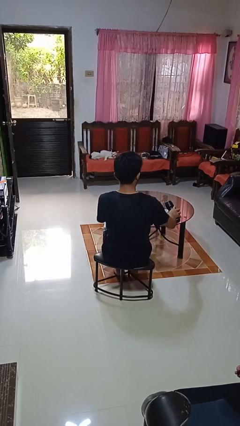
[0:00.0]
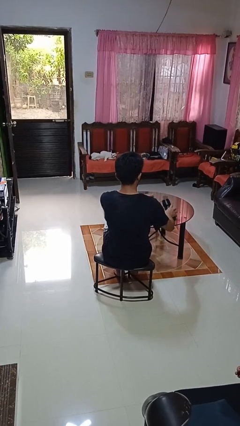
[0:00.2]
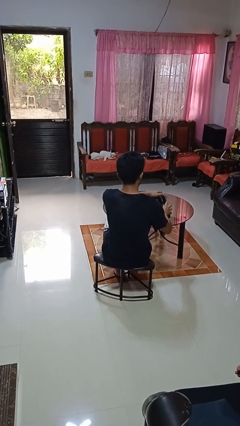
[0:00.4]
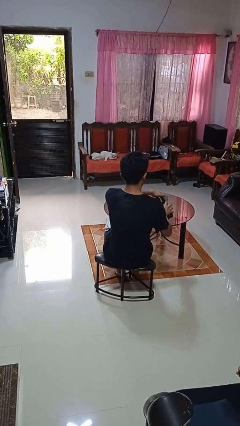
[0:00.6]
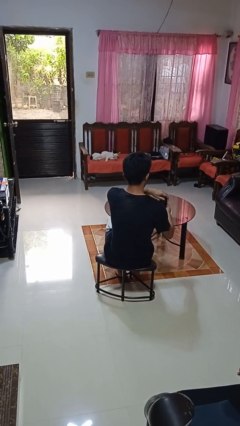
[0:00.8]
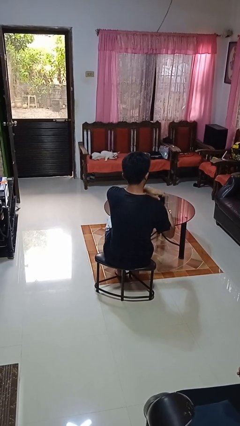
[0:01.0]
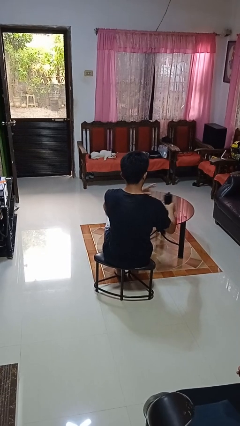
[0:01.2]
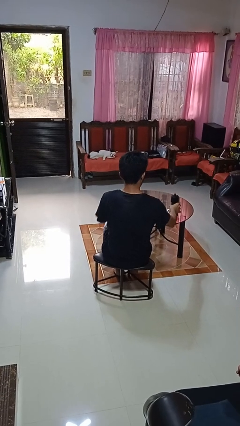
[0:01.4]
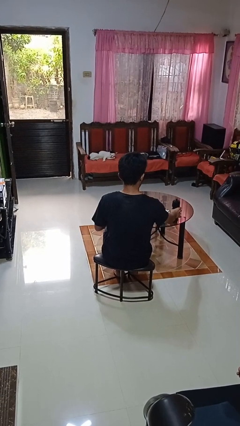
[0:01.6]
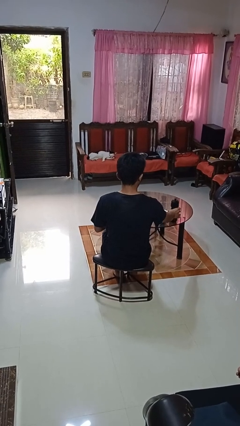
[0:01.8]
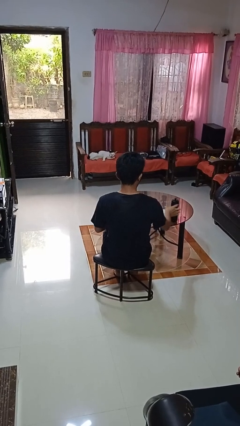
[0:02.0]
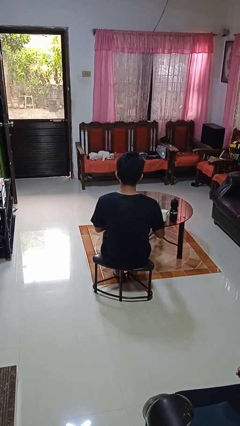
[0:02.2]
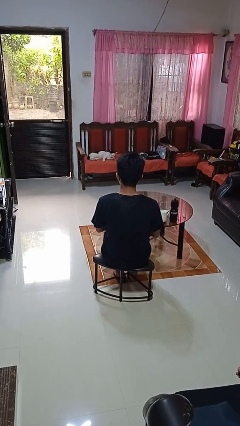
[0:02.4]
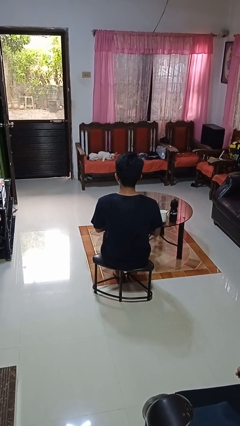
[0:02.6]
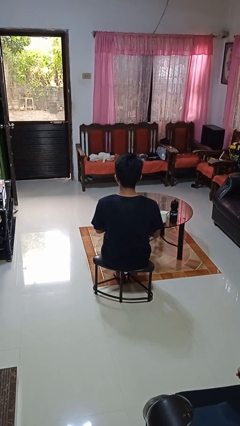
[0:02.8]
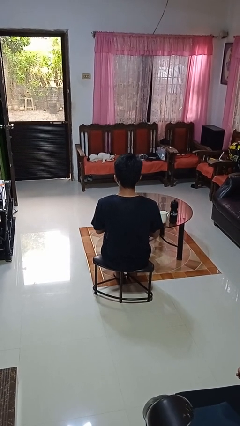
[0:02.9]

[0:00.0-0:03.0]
person screws lid to bottle

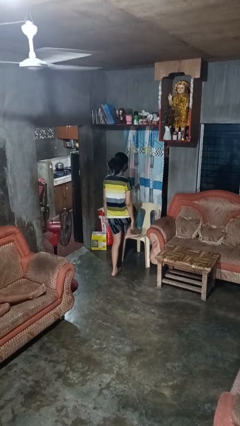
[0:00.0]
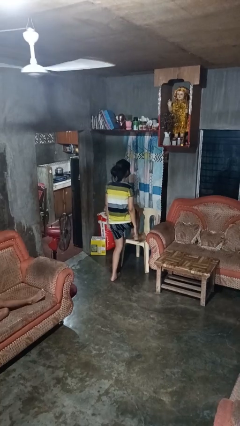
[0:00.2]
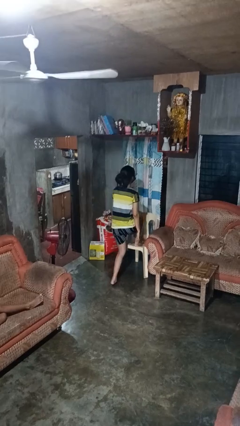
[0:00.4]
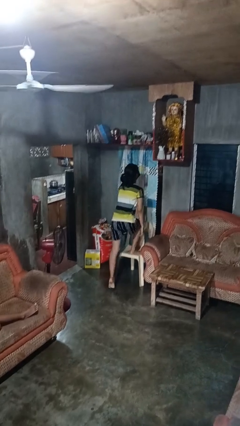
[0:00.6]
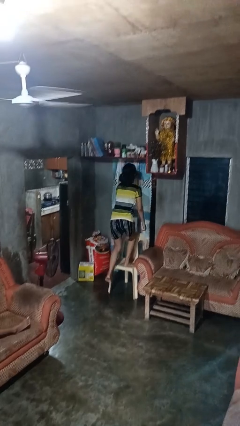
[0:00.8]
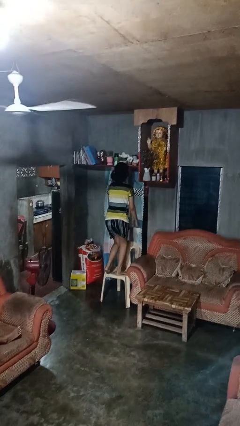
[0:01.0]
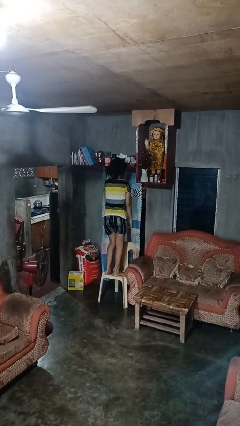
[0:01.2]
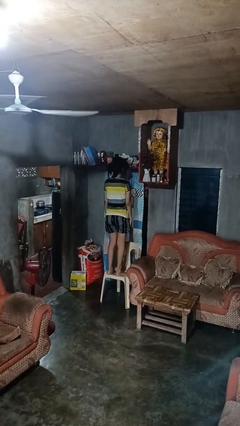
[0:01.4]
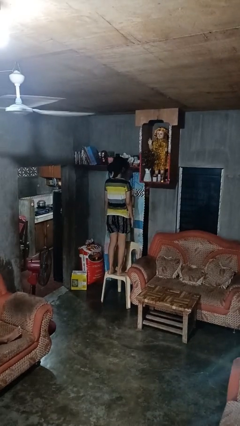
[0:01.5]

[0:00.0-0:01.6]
person climbs on chair

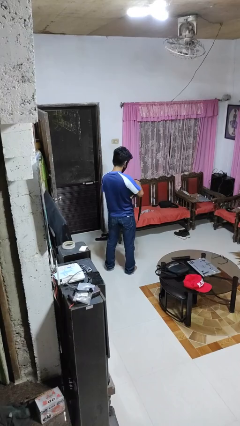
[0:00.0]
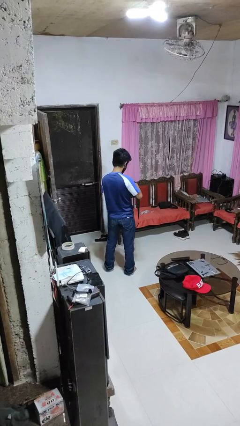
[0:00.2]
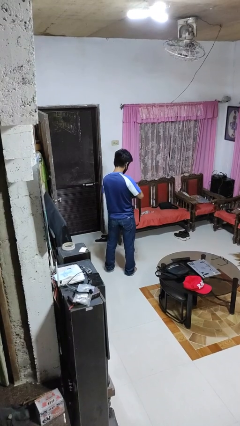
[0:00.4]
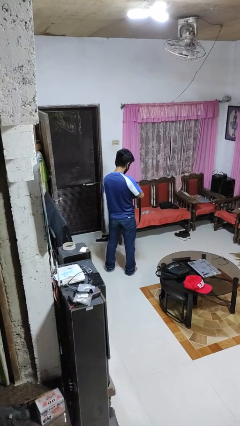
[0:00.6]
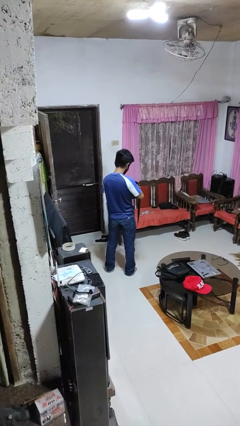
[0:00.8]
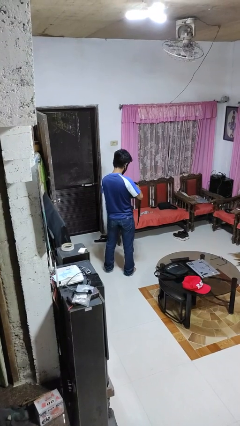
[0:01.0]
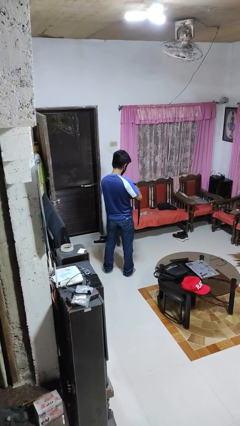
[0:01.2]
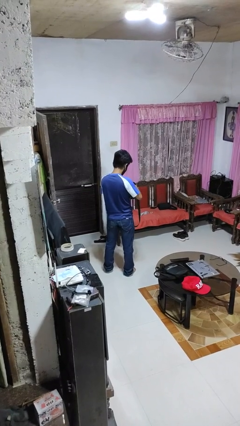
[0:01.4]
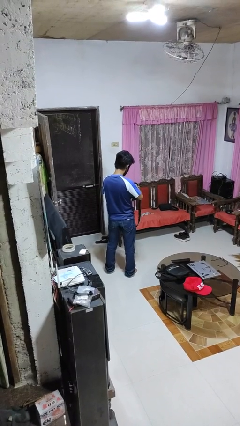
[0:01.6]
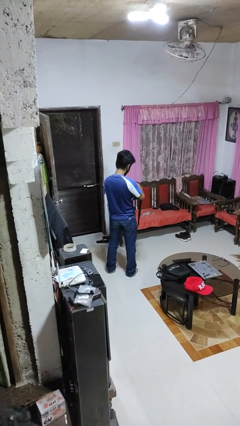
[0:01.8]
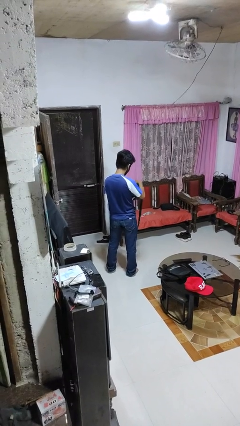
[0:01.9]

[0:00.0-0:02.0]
person searches in purse

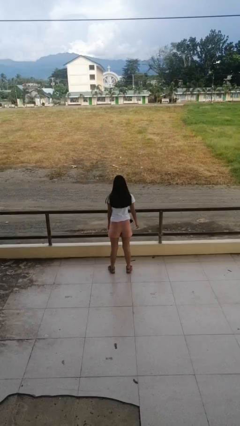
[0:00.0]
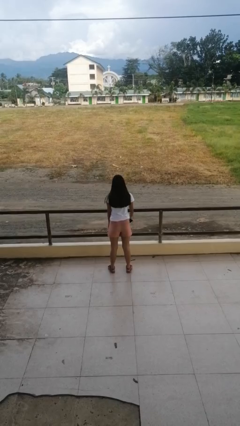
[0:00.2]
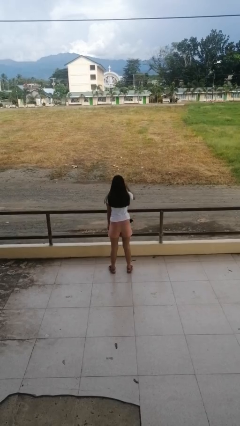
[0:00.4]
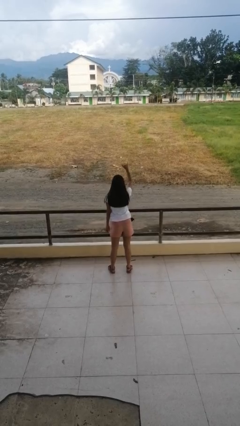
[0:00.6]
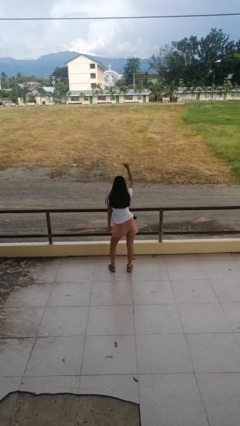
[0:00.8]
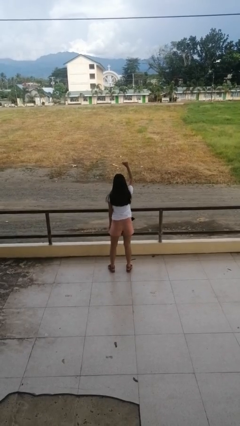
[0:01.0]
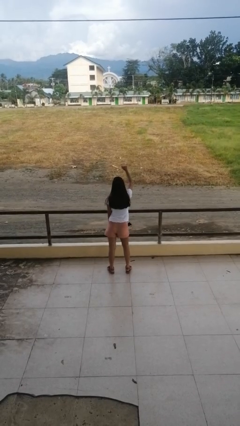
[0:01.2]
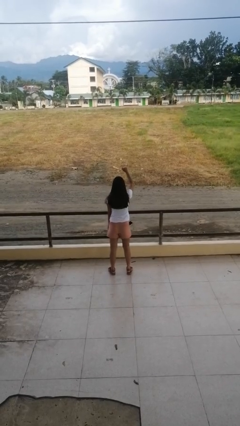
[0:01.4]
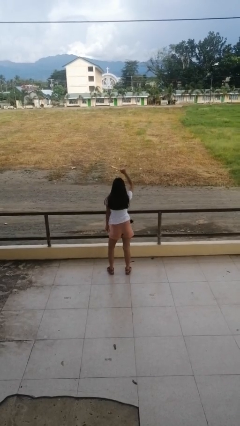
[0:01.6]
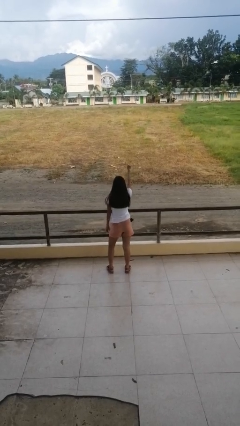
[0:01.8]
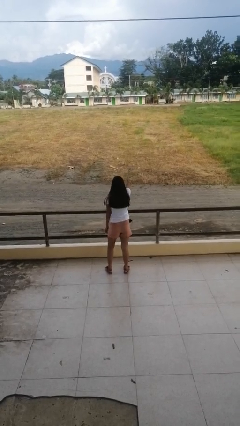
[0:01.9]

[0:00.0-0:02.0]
person dances in place

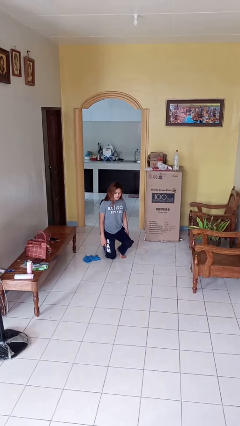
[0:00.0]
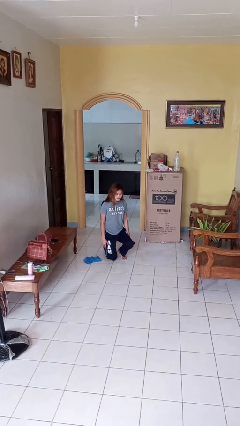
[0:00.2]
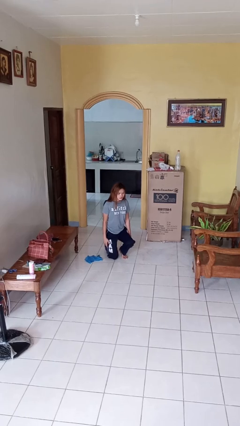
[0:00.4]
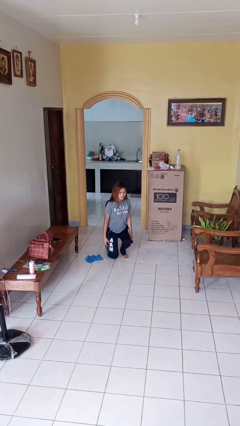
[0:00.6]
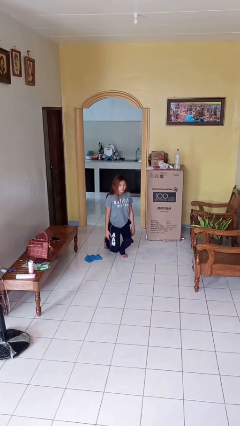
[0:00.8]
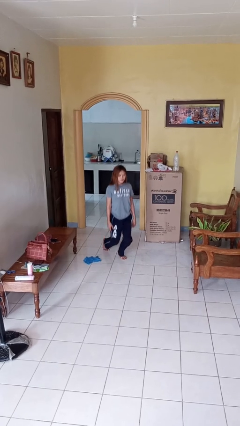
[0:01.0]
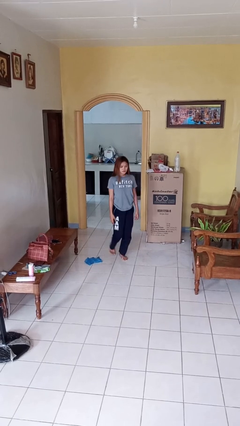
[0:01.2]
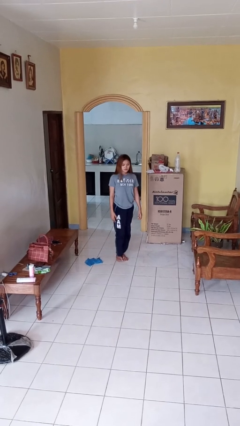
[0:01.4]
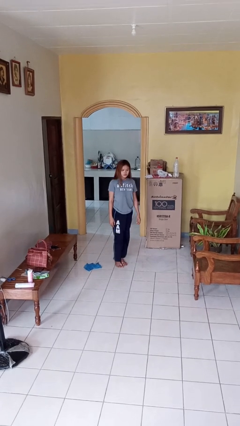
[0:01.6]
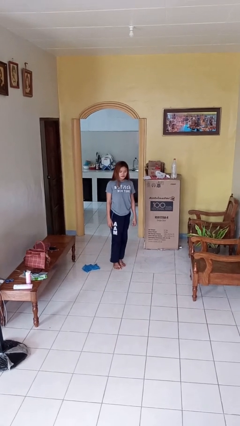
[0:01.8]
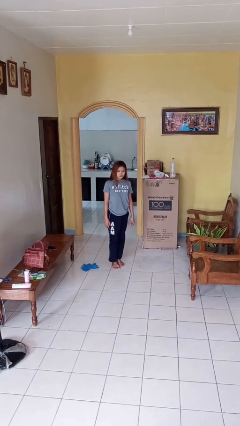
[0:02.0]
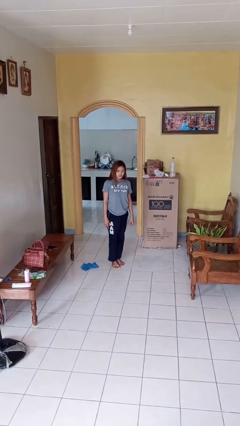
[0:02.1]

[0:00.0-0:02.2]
person stands up from floor

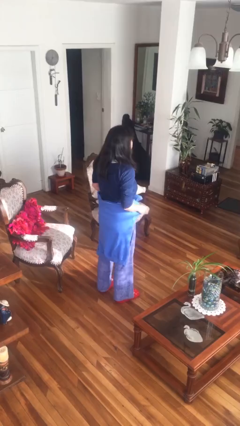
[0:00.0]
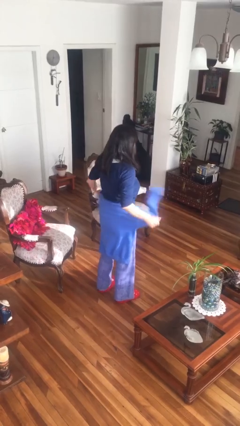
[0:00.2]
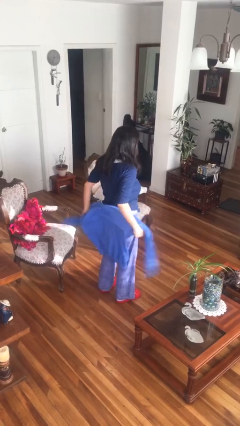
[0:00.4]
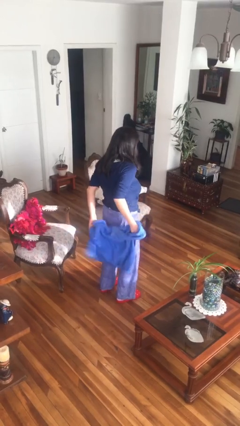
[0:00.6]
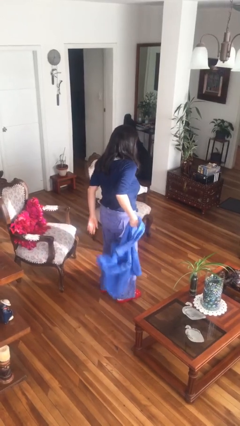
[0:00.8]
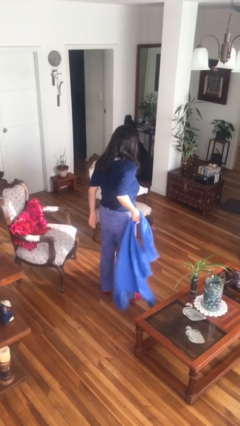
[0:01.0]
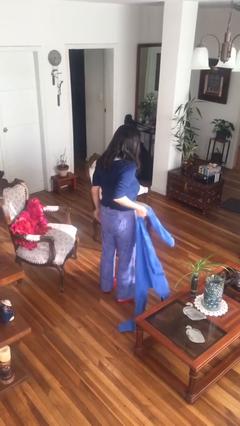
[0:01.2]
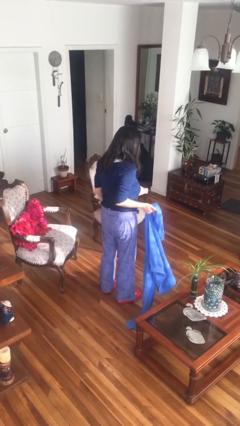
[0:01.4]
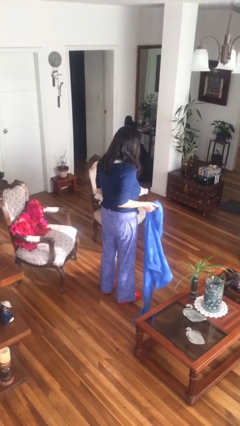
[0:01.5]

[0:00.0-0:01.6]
person unties jacket around waist

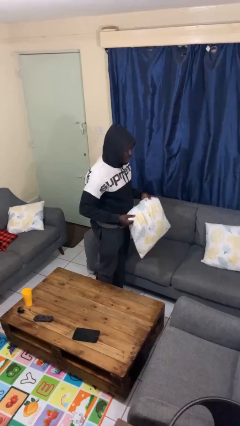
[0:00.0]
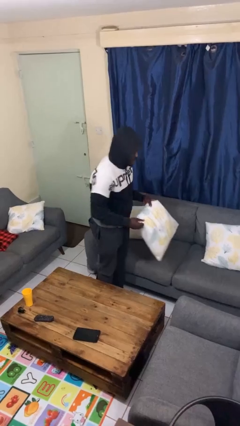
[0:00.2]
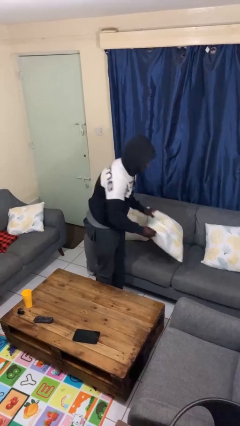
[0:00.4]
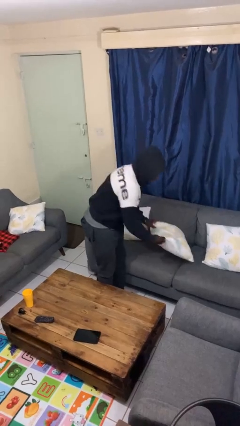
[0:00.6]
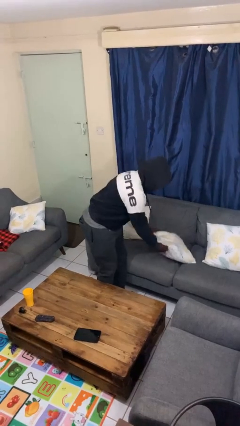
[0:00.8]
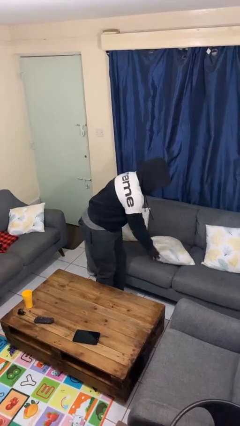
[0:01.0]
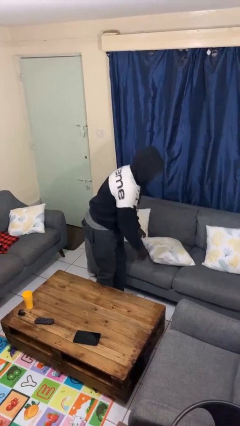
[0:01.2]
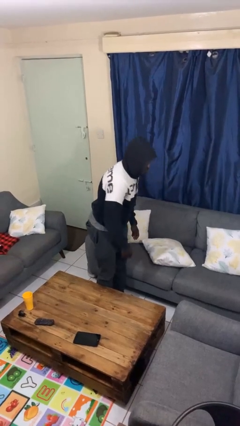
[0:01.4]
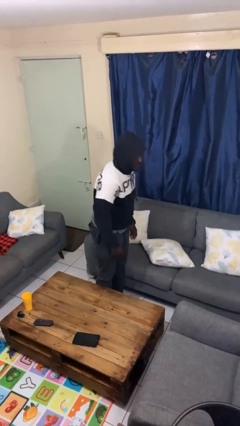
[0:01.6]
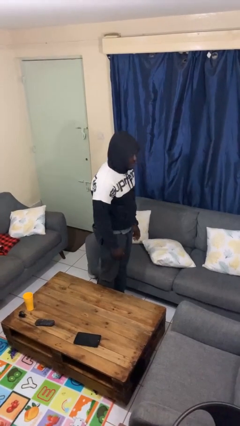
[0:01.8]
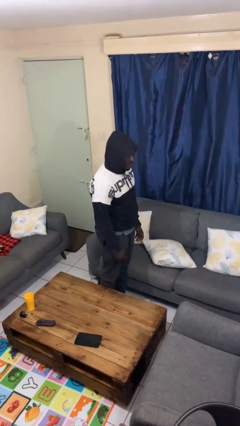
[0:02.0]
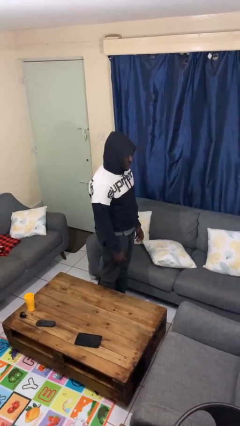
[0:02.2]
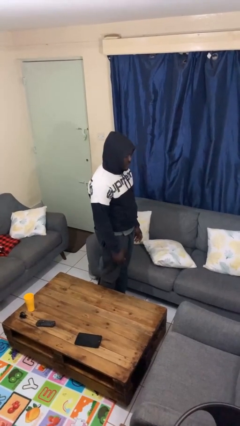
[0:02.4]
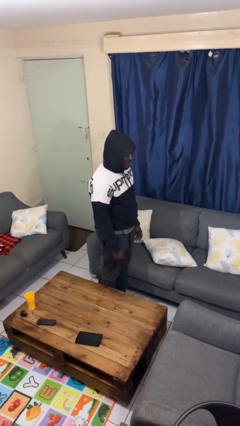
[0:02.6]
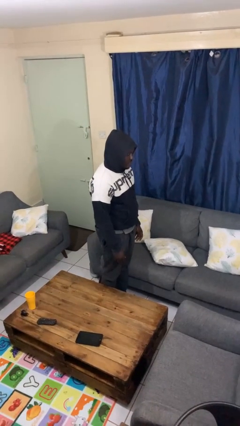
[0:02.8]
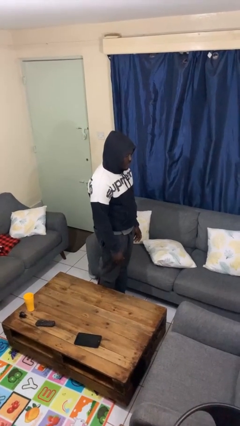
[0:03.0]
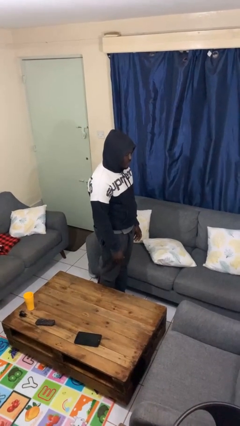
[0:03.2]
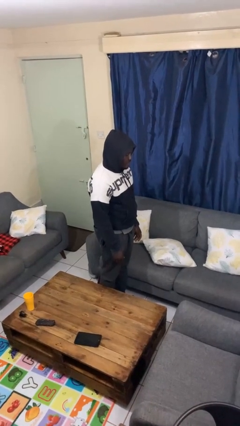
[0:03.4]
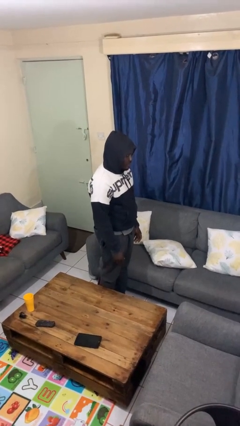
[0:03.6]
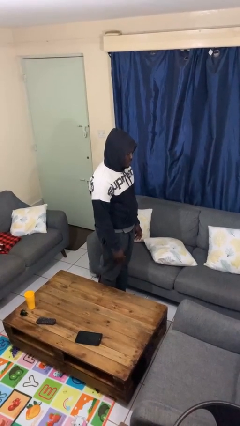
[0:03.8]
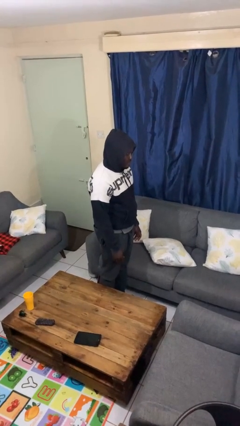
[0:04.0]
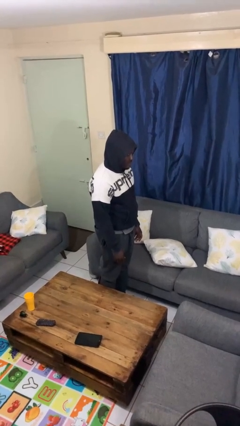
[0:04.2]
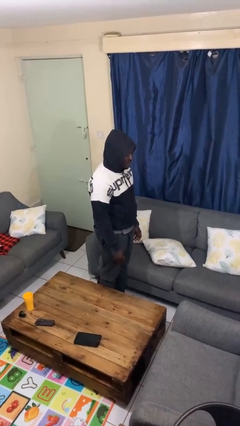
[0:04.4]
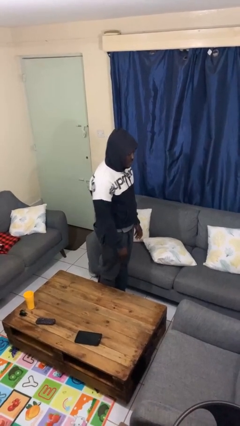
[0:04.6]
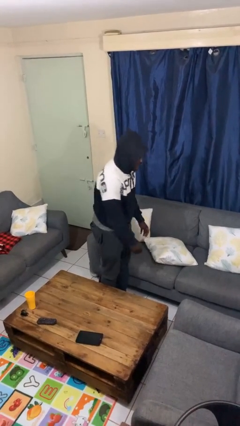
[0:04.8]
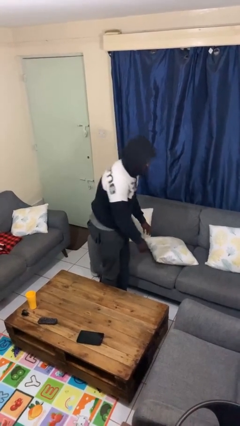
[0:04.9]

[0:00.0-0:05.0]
person puts down object on couch
